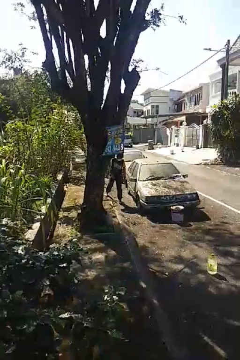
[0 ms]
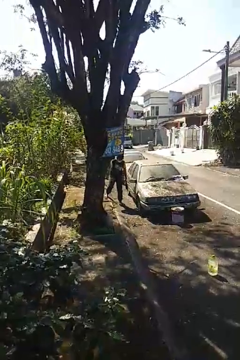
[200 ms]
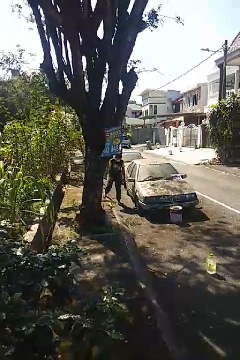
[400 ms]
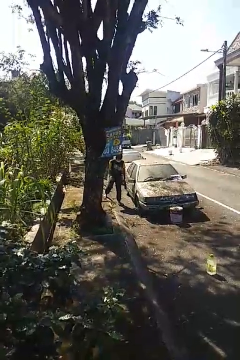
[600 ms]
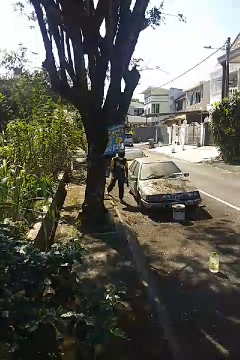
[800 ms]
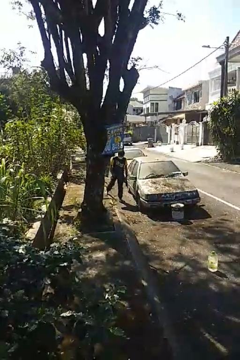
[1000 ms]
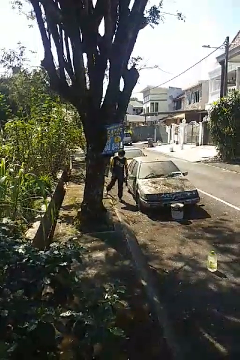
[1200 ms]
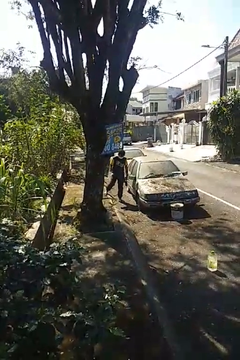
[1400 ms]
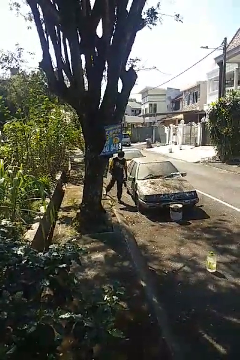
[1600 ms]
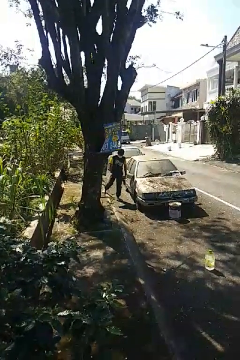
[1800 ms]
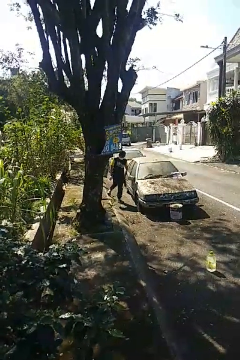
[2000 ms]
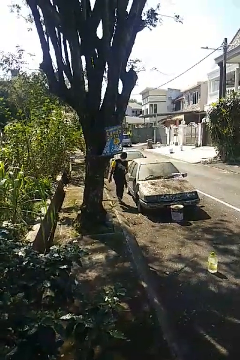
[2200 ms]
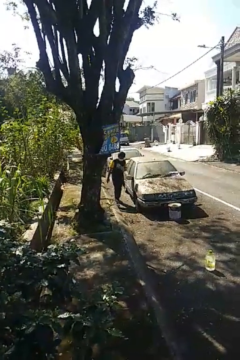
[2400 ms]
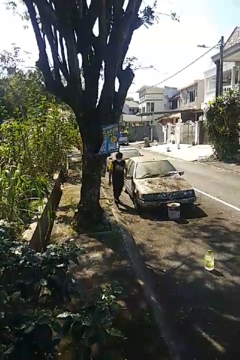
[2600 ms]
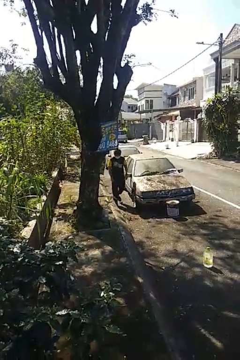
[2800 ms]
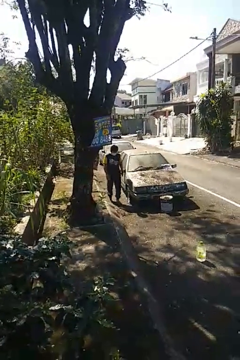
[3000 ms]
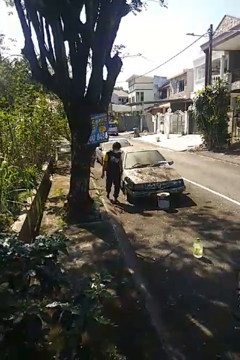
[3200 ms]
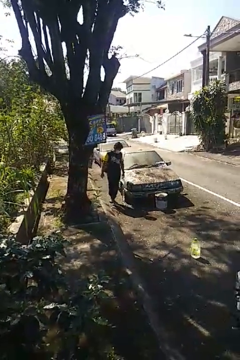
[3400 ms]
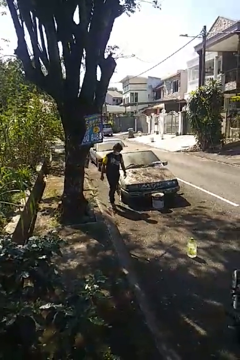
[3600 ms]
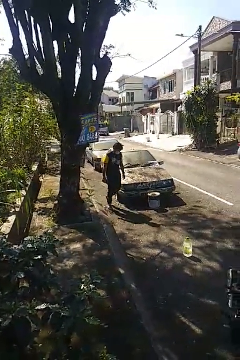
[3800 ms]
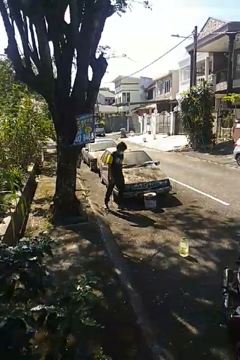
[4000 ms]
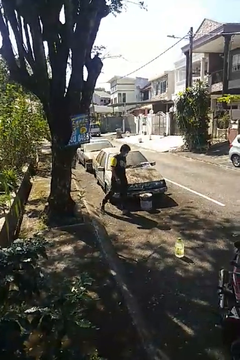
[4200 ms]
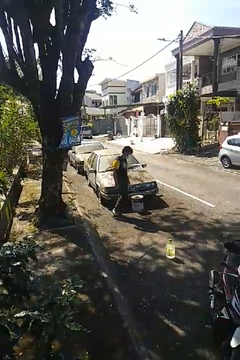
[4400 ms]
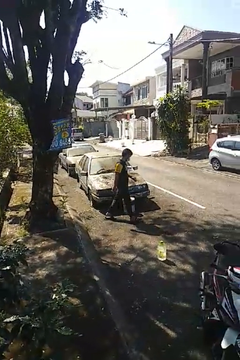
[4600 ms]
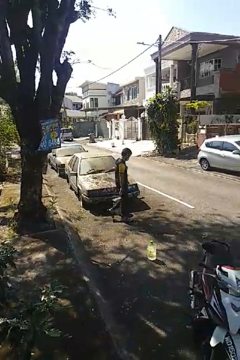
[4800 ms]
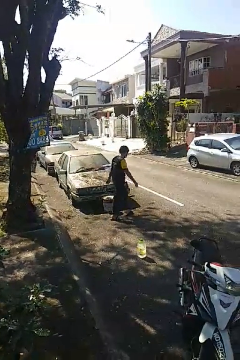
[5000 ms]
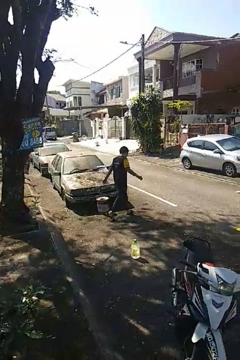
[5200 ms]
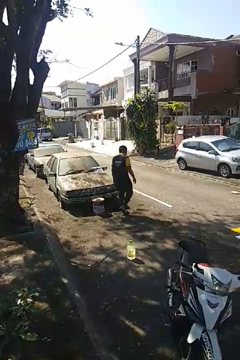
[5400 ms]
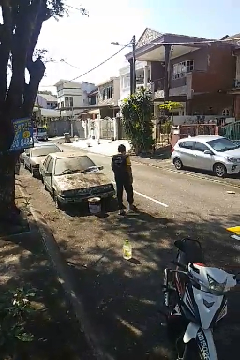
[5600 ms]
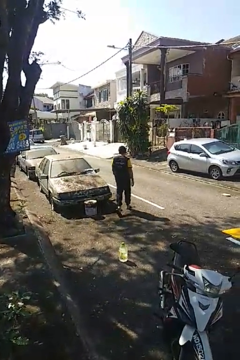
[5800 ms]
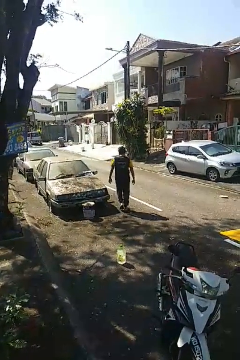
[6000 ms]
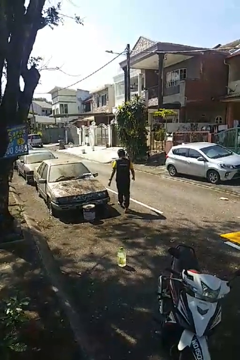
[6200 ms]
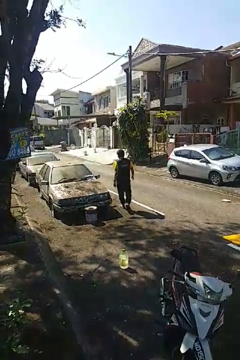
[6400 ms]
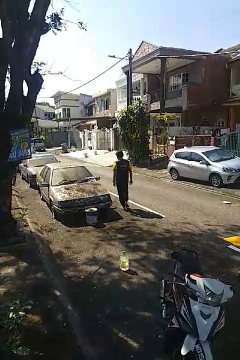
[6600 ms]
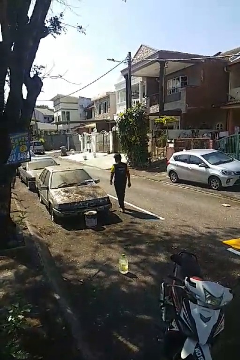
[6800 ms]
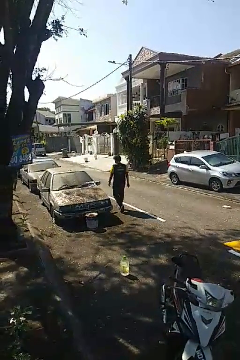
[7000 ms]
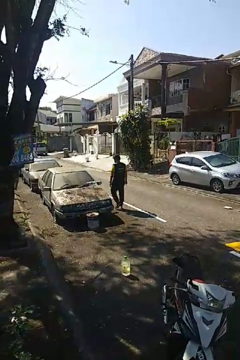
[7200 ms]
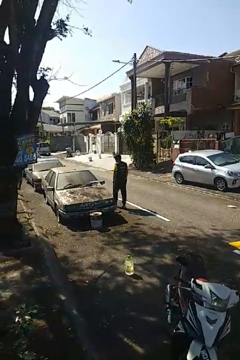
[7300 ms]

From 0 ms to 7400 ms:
person walks around car

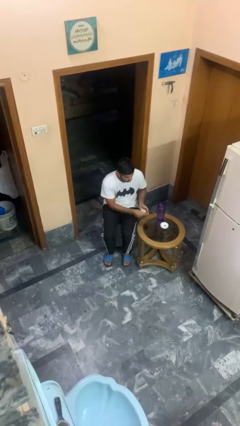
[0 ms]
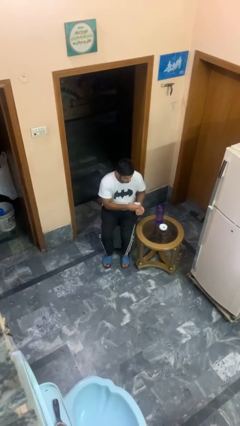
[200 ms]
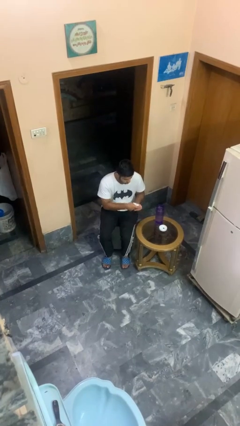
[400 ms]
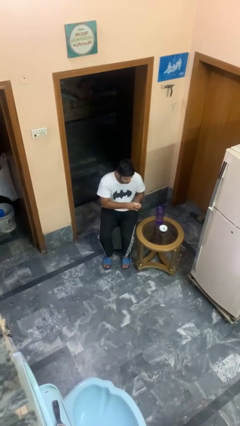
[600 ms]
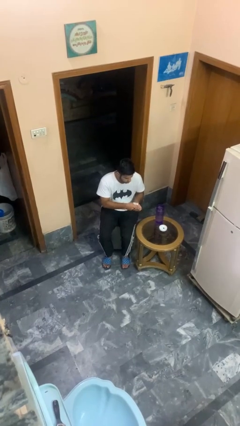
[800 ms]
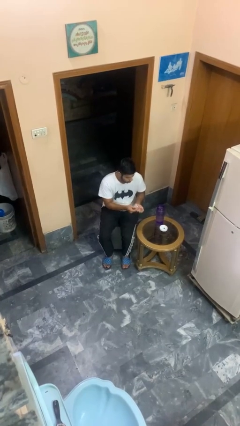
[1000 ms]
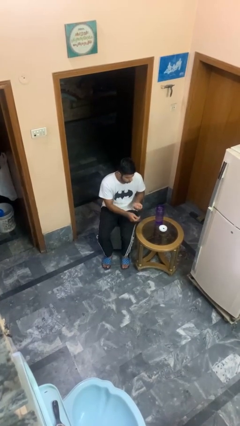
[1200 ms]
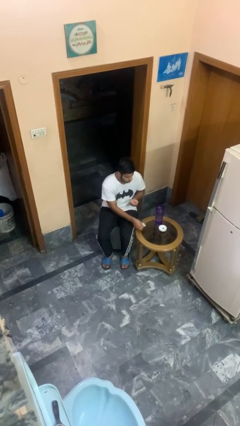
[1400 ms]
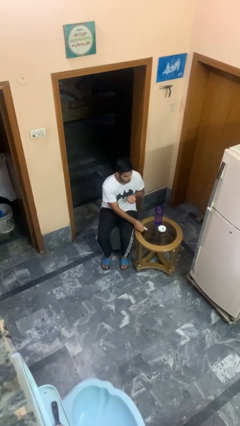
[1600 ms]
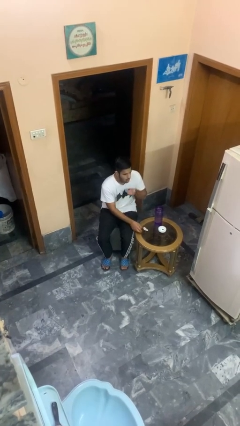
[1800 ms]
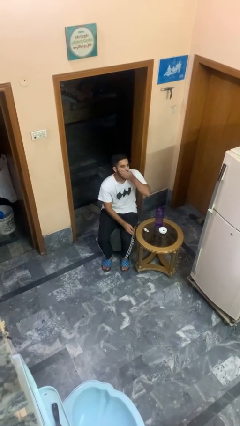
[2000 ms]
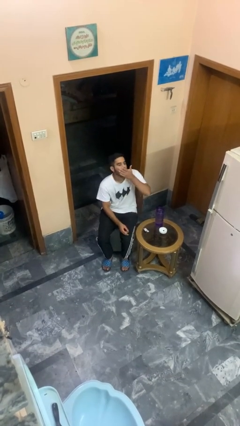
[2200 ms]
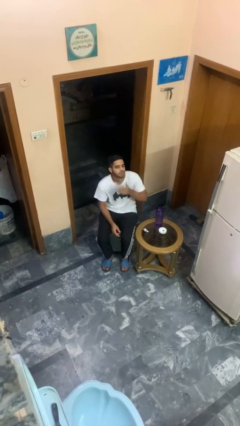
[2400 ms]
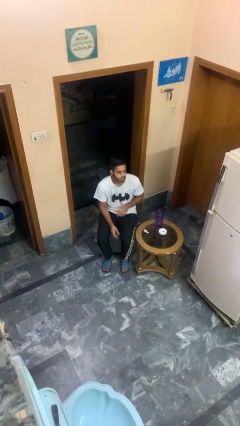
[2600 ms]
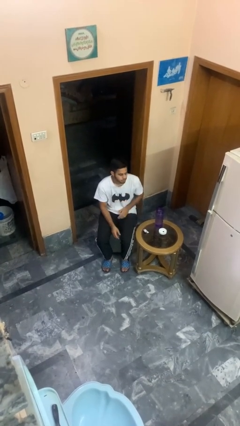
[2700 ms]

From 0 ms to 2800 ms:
person takes medicine pills

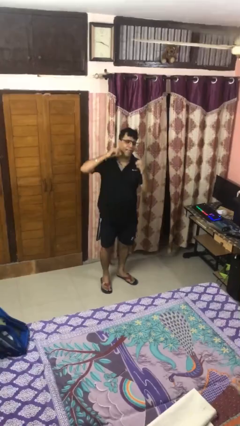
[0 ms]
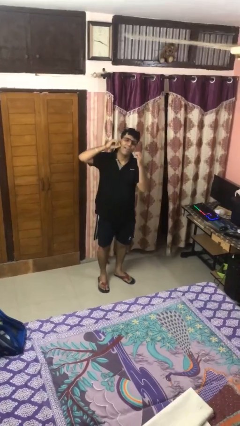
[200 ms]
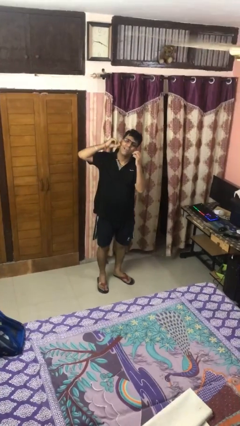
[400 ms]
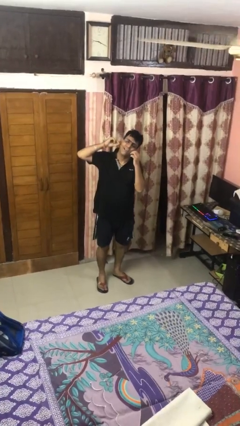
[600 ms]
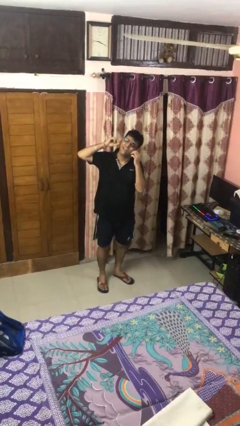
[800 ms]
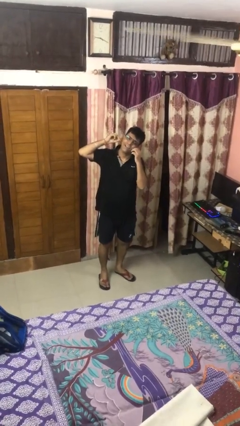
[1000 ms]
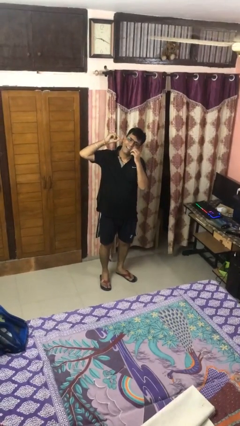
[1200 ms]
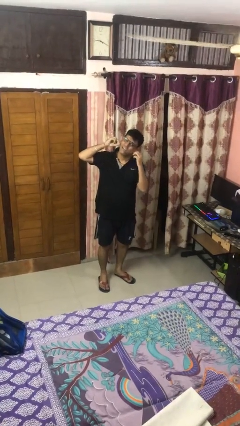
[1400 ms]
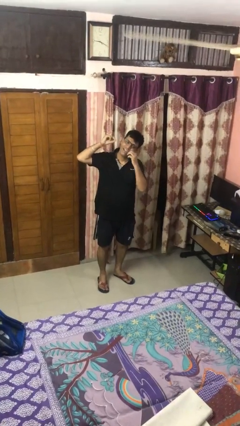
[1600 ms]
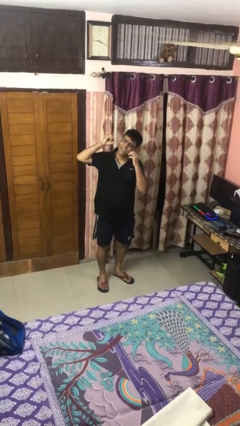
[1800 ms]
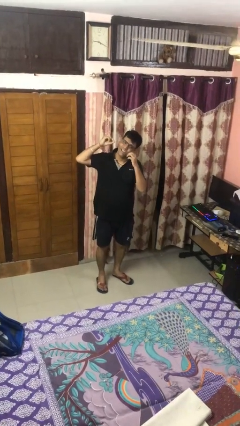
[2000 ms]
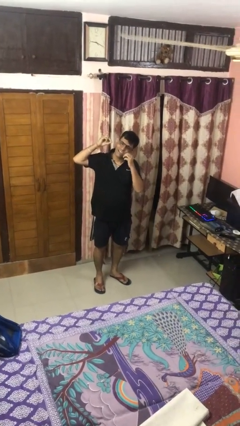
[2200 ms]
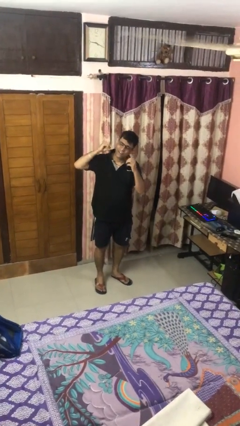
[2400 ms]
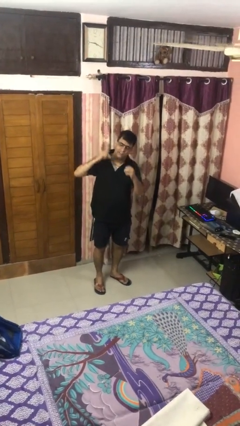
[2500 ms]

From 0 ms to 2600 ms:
person flosses

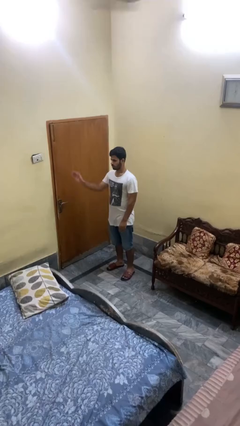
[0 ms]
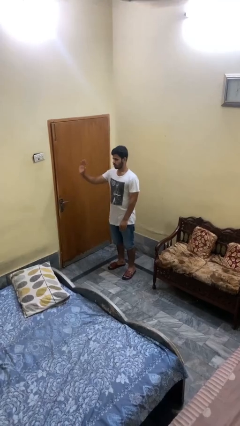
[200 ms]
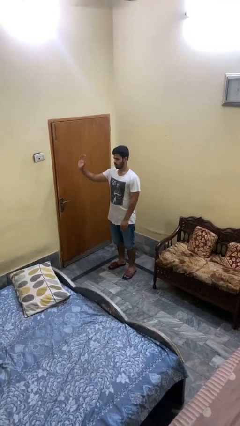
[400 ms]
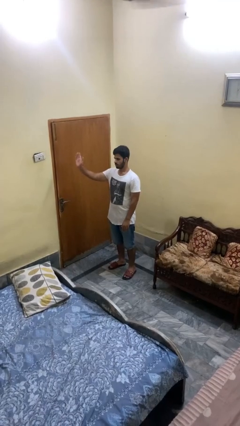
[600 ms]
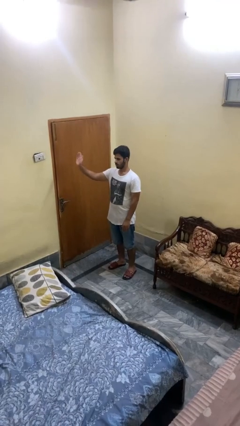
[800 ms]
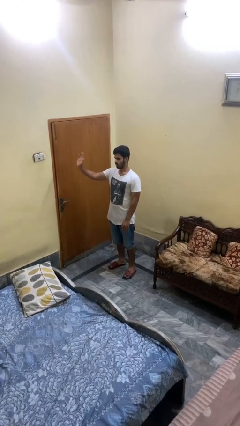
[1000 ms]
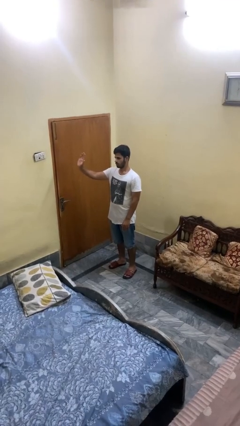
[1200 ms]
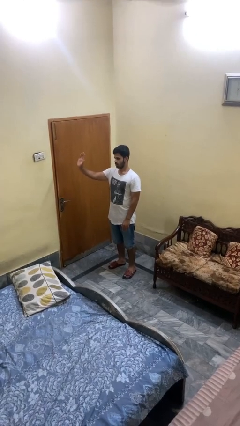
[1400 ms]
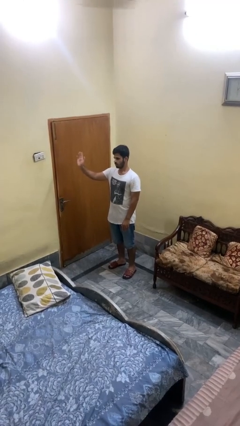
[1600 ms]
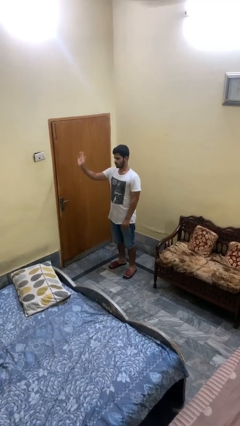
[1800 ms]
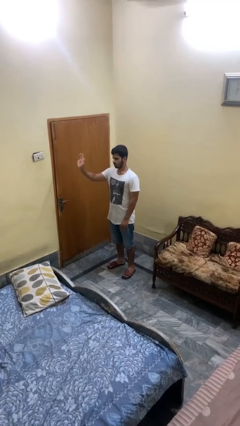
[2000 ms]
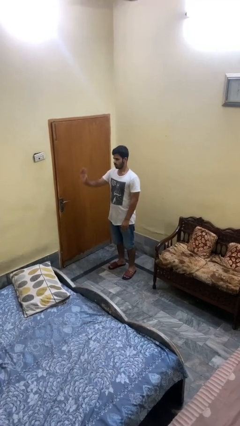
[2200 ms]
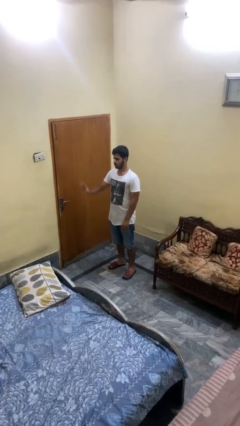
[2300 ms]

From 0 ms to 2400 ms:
person waves at person

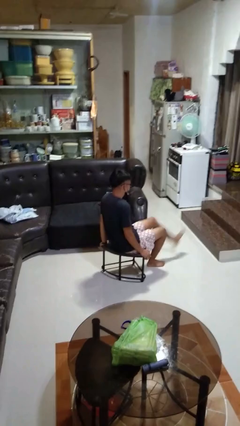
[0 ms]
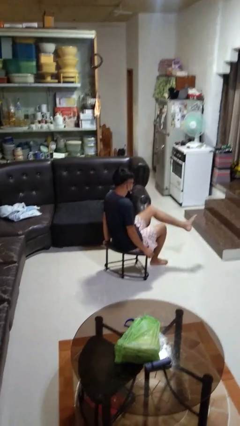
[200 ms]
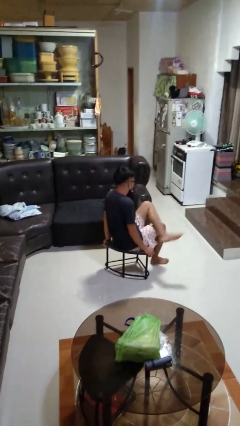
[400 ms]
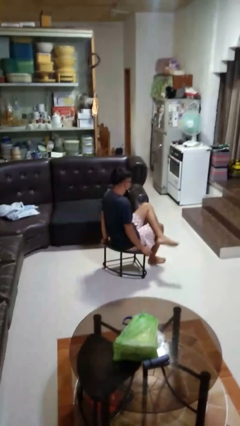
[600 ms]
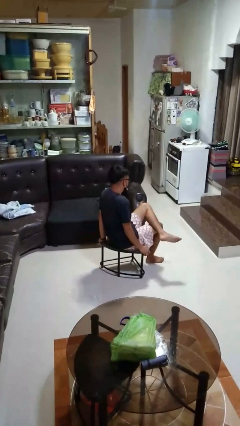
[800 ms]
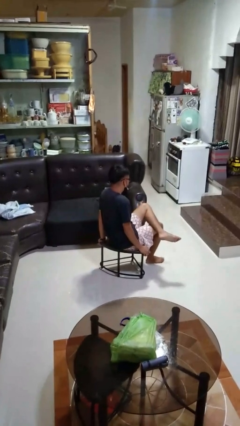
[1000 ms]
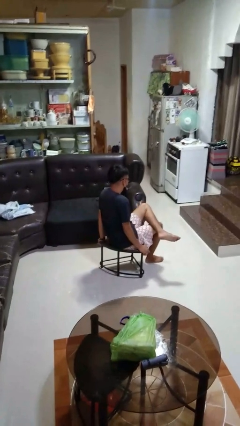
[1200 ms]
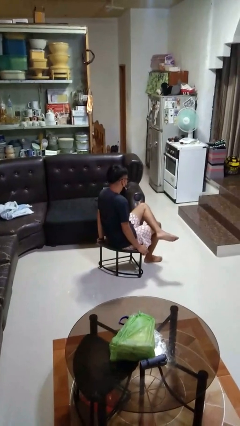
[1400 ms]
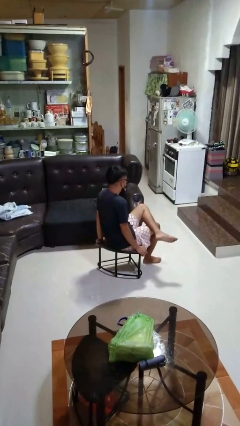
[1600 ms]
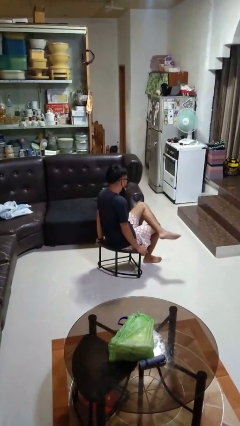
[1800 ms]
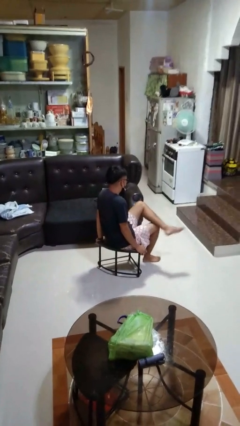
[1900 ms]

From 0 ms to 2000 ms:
person crosses legs

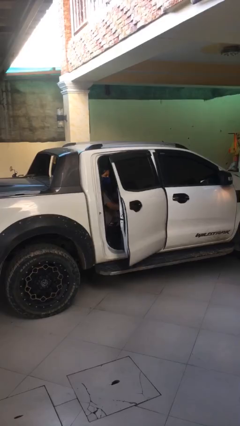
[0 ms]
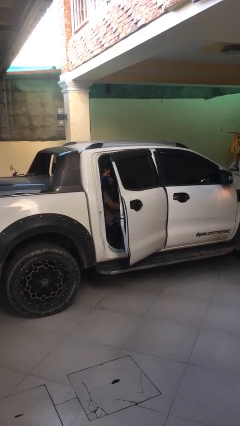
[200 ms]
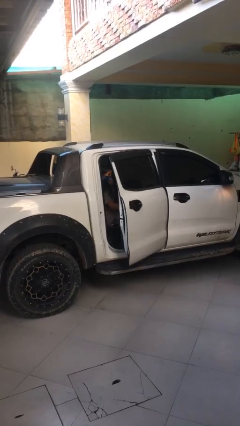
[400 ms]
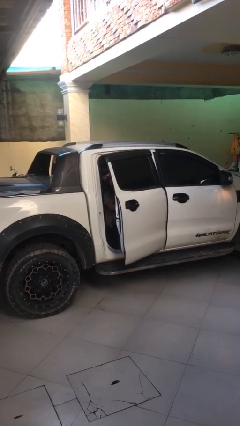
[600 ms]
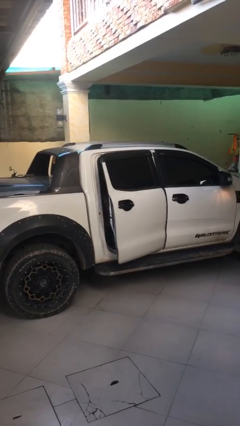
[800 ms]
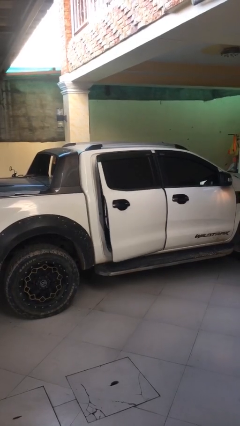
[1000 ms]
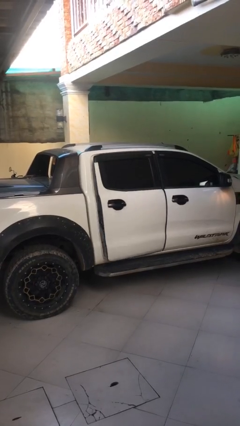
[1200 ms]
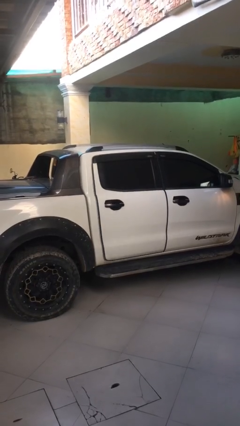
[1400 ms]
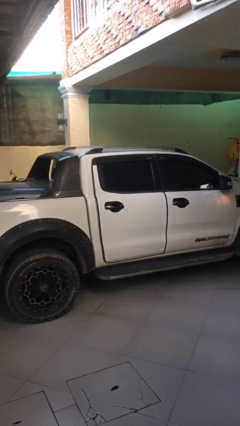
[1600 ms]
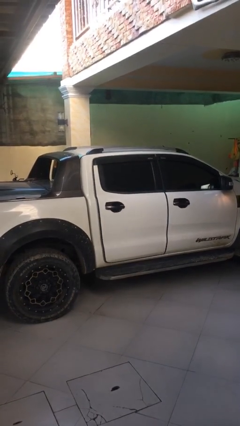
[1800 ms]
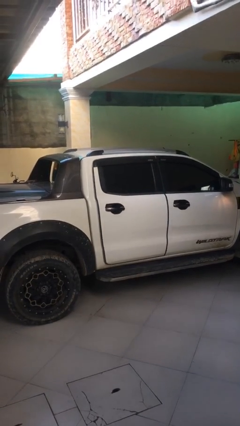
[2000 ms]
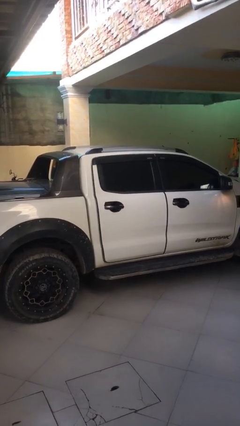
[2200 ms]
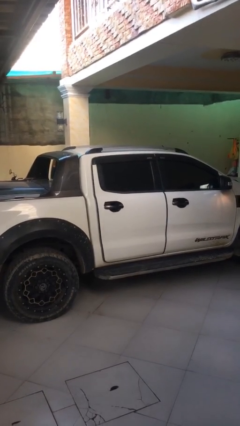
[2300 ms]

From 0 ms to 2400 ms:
person closes car door
